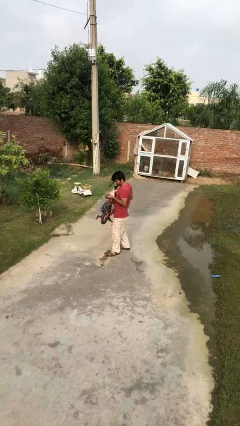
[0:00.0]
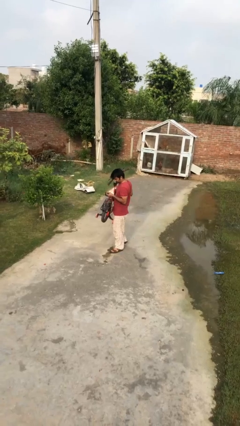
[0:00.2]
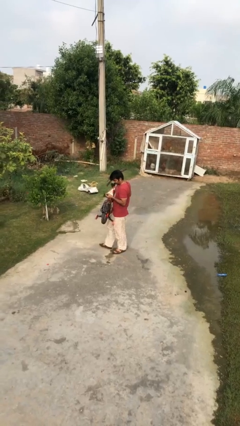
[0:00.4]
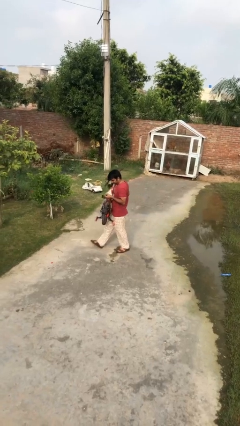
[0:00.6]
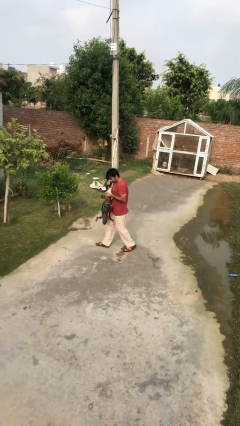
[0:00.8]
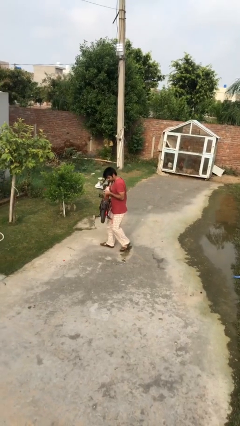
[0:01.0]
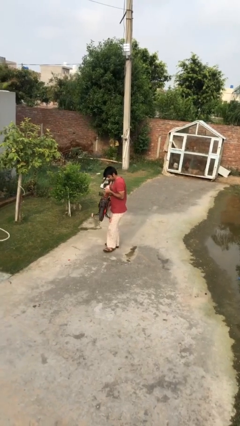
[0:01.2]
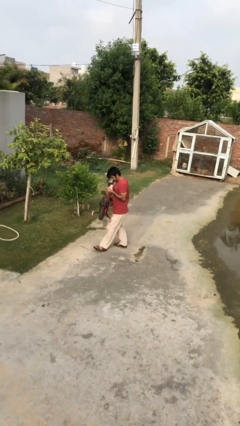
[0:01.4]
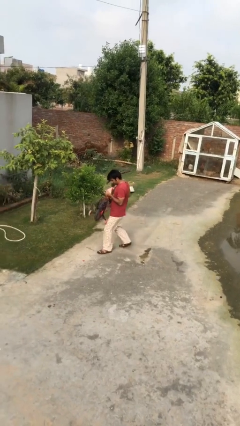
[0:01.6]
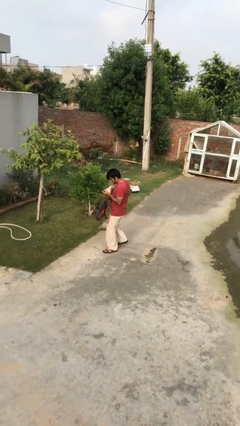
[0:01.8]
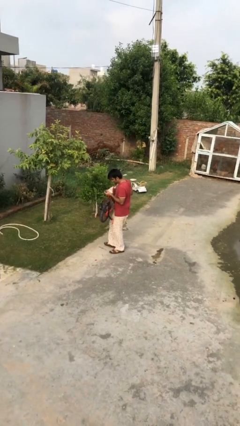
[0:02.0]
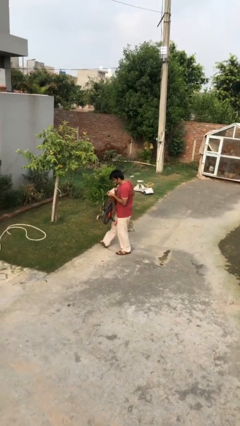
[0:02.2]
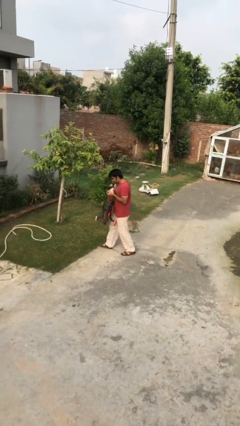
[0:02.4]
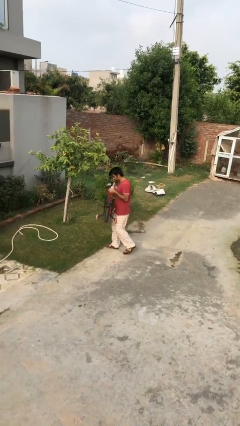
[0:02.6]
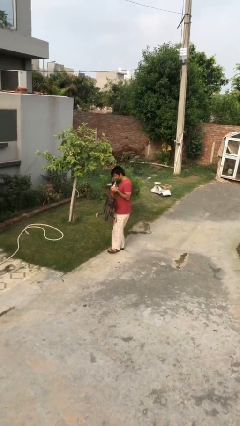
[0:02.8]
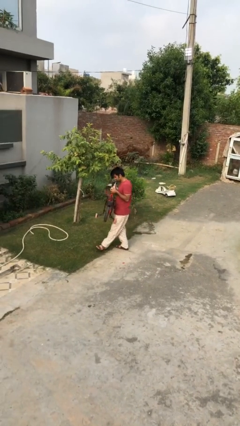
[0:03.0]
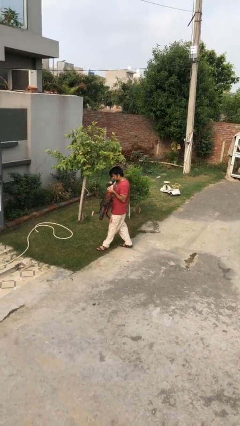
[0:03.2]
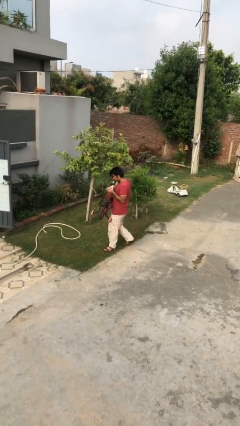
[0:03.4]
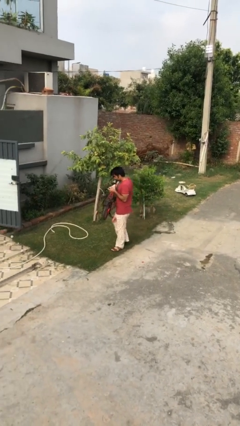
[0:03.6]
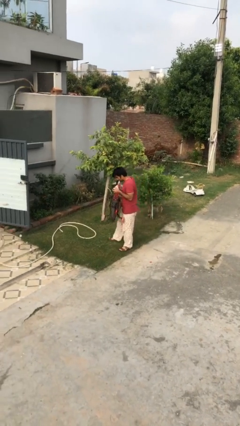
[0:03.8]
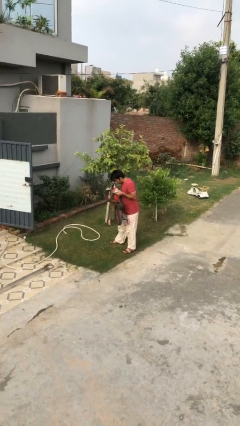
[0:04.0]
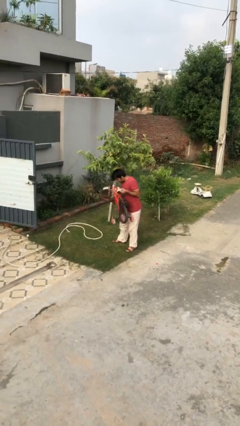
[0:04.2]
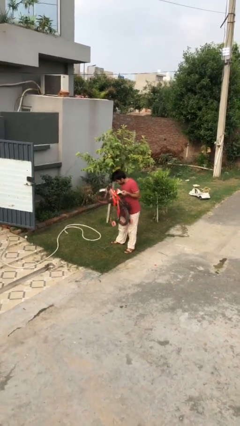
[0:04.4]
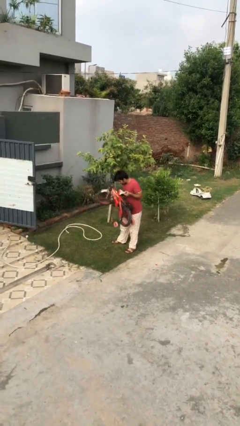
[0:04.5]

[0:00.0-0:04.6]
person carries heavy object

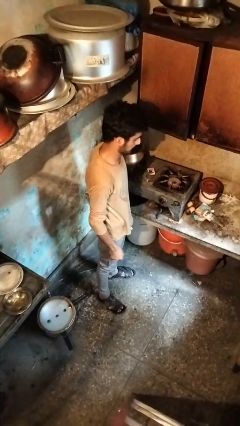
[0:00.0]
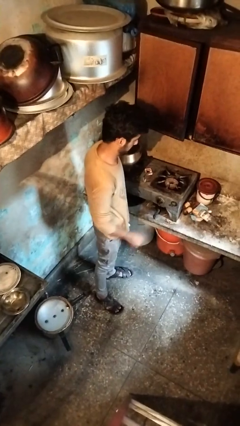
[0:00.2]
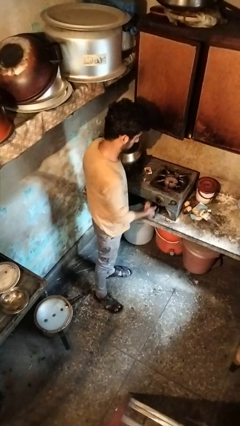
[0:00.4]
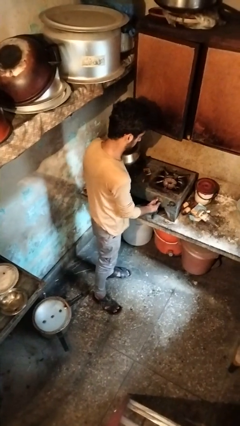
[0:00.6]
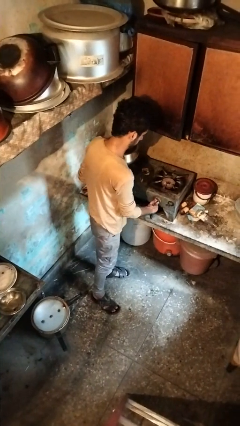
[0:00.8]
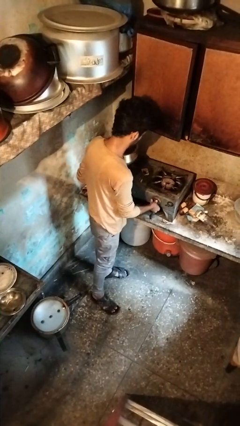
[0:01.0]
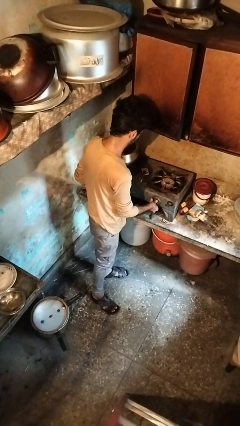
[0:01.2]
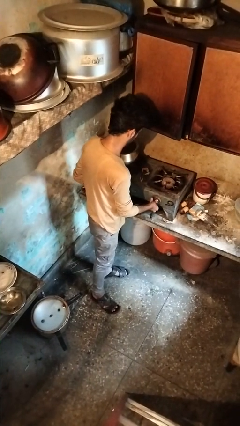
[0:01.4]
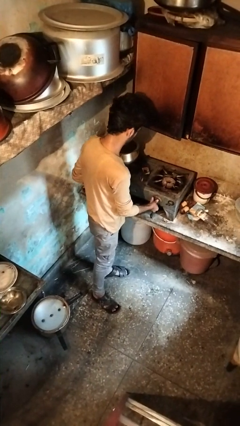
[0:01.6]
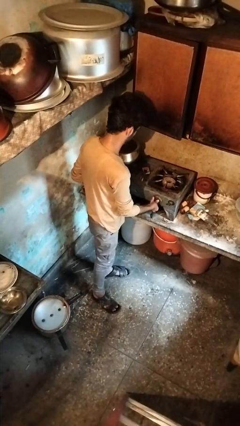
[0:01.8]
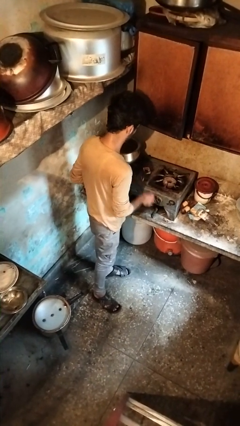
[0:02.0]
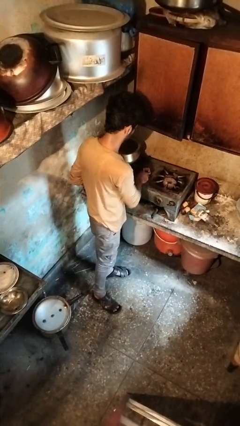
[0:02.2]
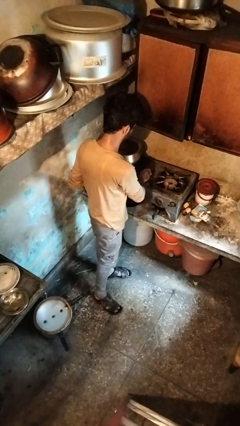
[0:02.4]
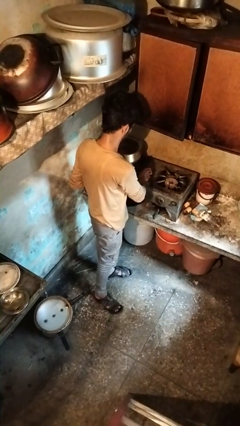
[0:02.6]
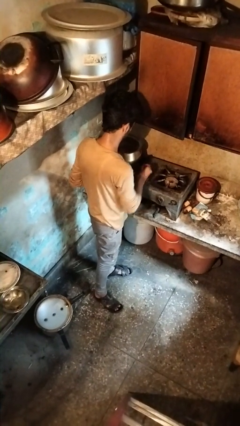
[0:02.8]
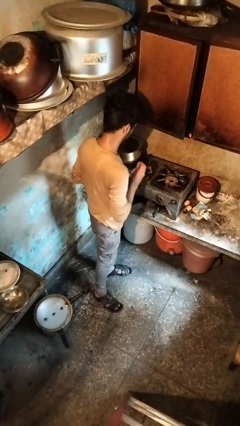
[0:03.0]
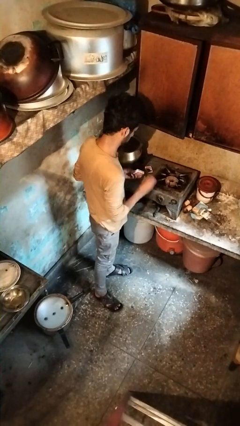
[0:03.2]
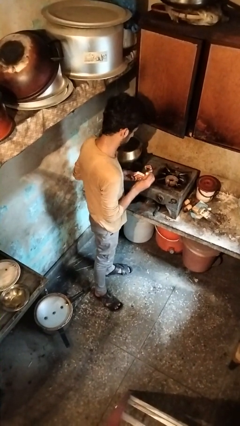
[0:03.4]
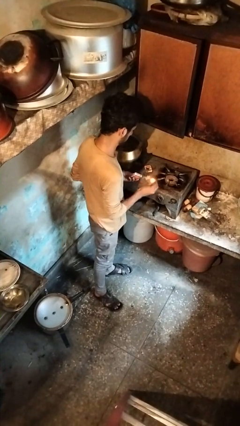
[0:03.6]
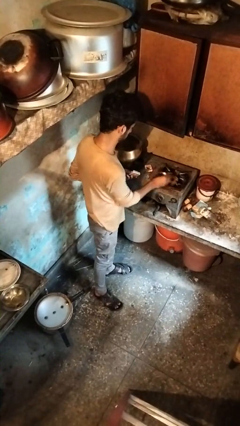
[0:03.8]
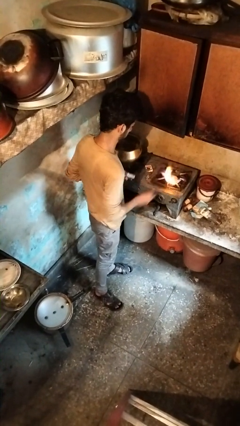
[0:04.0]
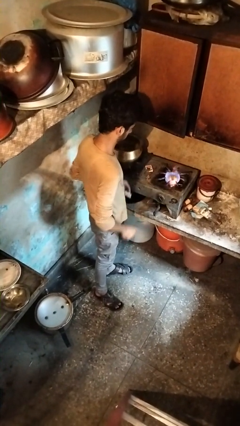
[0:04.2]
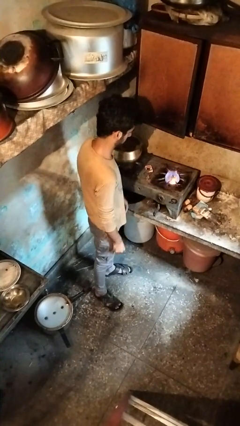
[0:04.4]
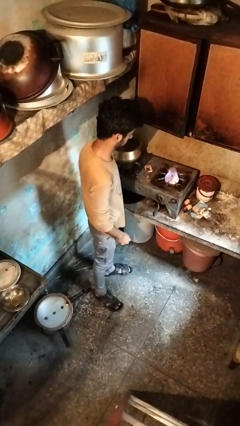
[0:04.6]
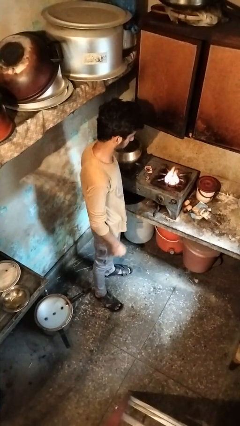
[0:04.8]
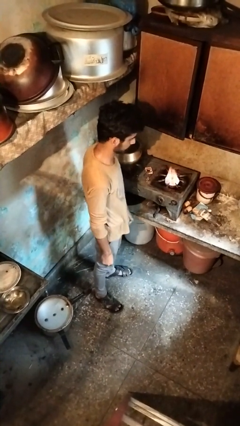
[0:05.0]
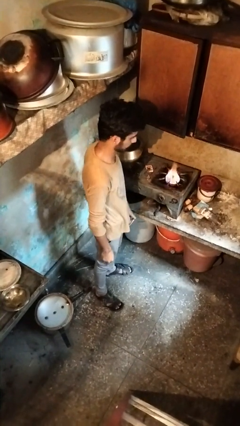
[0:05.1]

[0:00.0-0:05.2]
person turns on stovetop

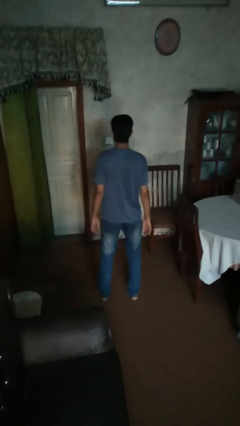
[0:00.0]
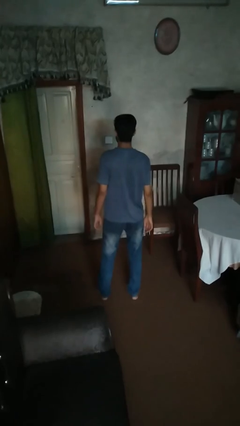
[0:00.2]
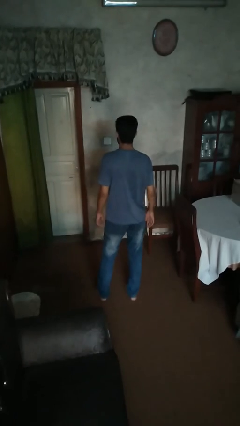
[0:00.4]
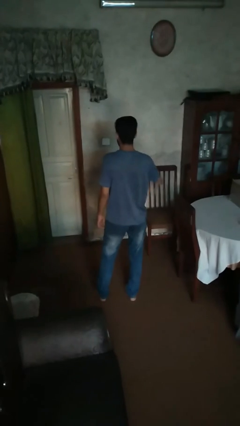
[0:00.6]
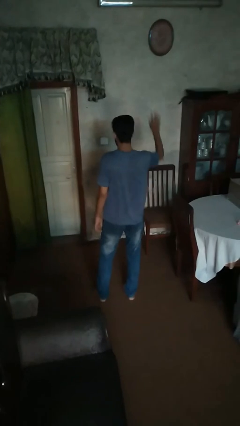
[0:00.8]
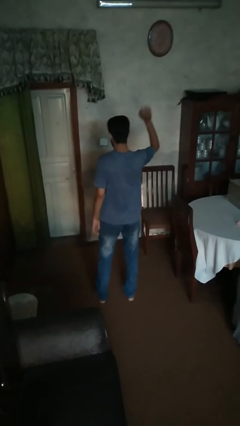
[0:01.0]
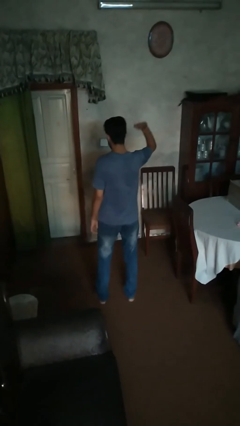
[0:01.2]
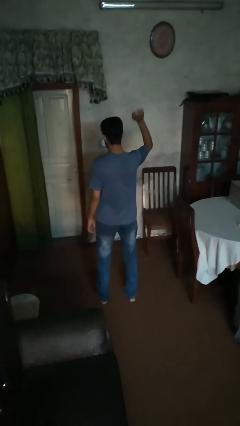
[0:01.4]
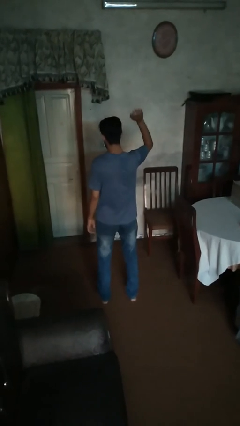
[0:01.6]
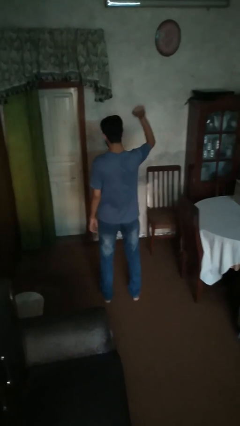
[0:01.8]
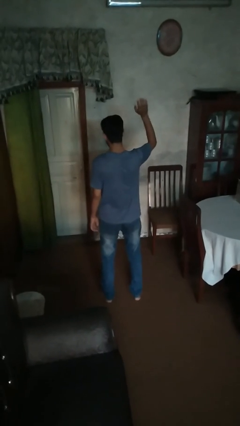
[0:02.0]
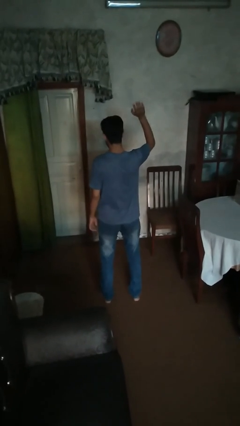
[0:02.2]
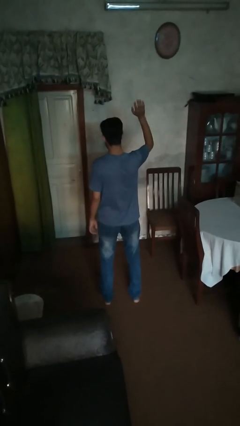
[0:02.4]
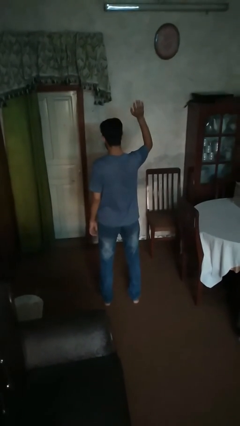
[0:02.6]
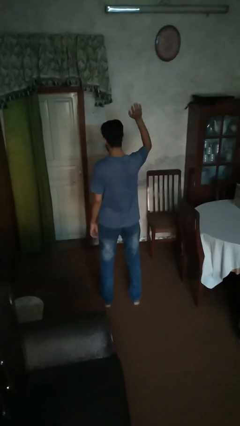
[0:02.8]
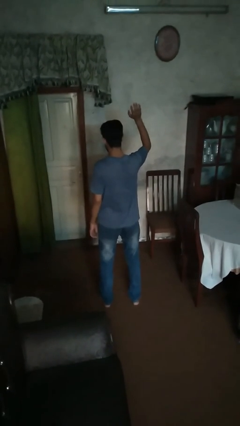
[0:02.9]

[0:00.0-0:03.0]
person gestures raise hand

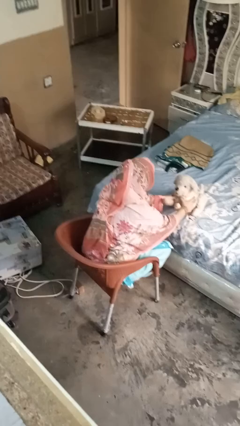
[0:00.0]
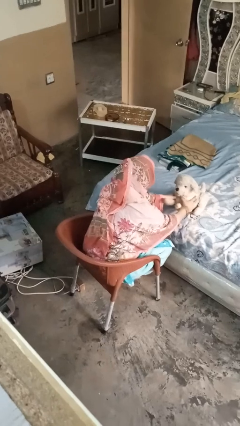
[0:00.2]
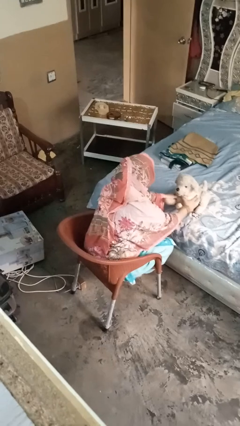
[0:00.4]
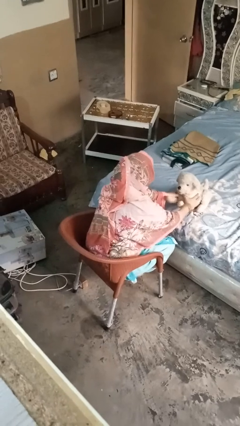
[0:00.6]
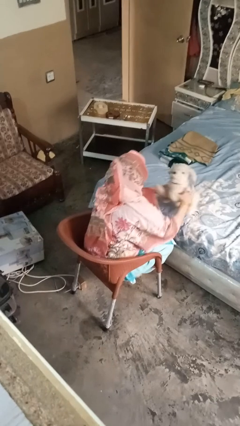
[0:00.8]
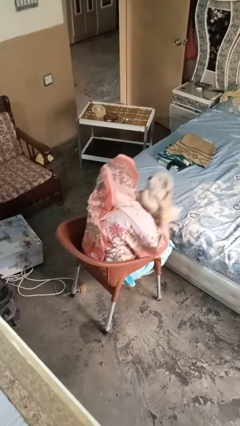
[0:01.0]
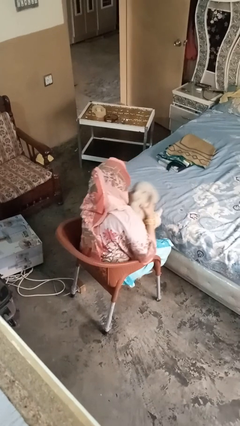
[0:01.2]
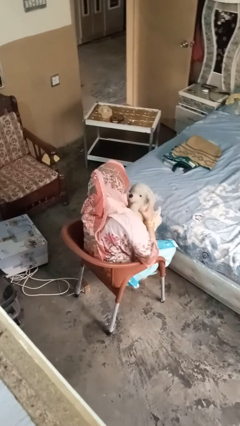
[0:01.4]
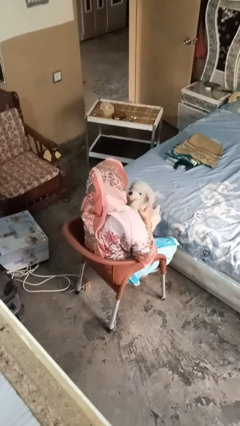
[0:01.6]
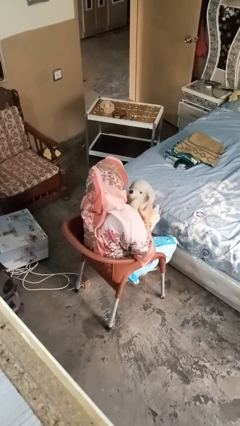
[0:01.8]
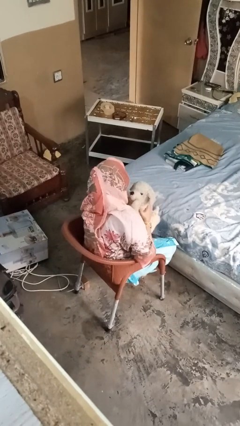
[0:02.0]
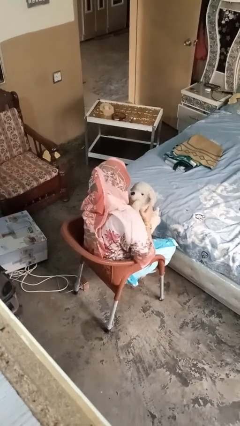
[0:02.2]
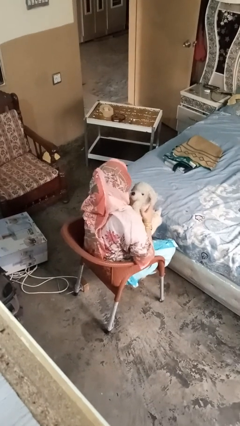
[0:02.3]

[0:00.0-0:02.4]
person hugs stuffed animal

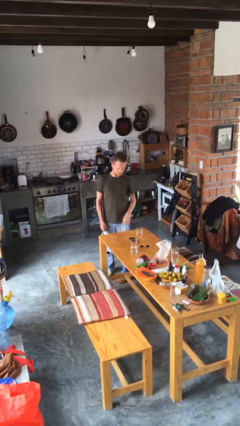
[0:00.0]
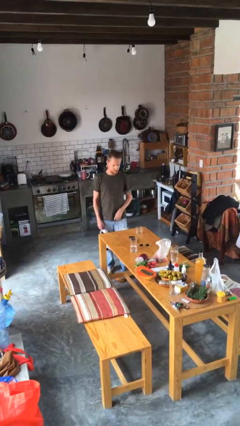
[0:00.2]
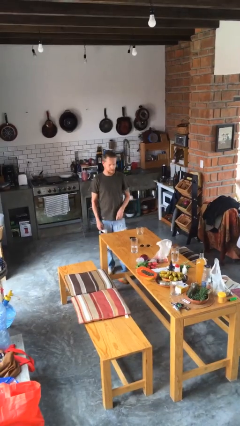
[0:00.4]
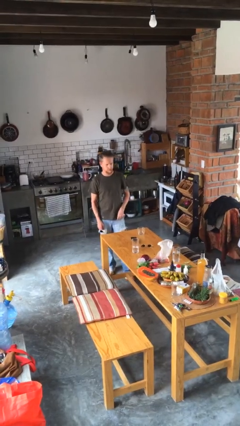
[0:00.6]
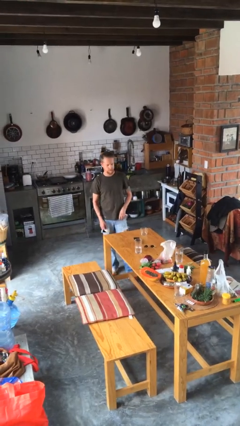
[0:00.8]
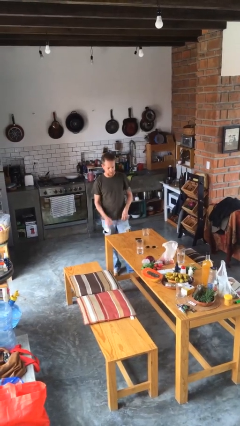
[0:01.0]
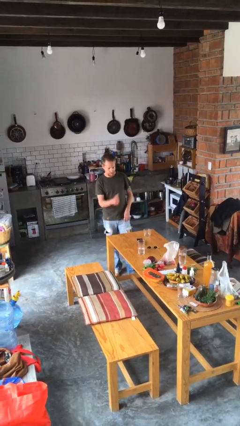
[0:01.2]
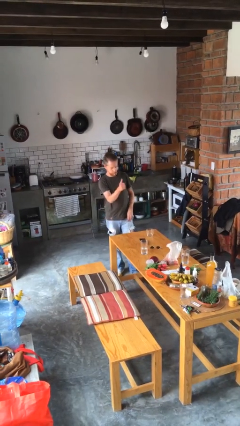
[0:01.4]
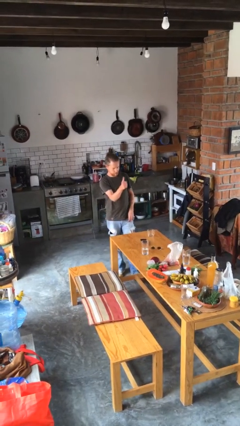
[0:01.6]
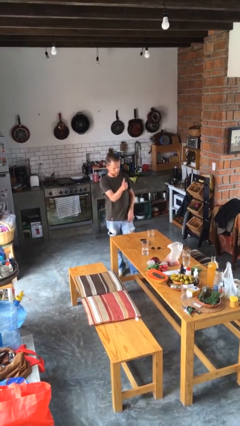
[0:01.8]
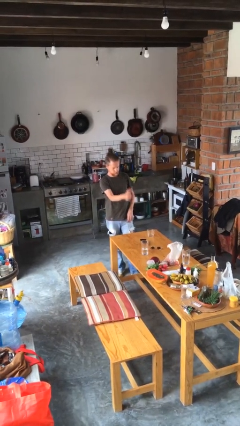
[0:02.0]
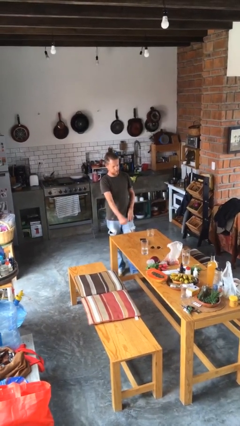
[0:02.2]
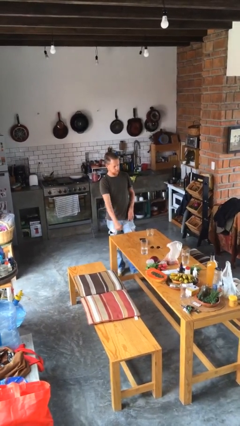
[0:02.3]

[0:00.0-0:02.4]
person gestures thumbs up
